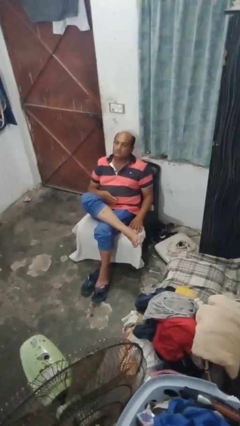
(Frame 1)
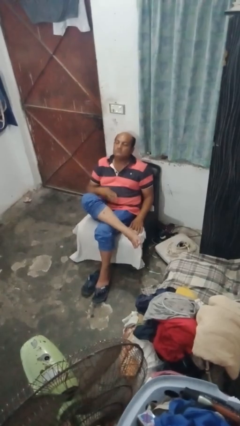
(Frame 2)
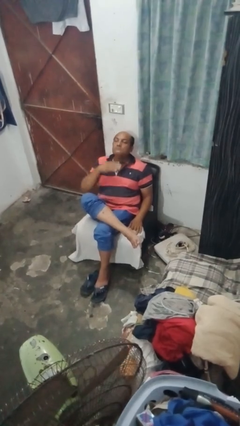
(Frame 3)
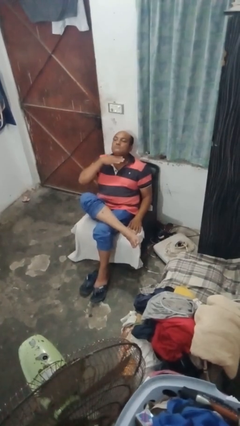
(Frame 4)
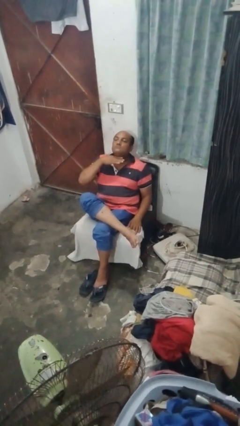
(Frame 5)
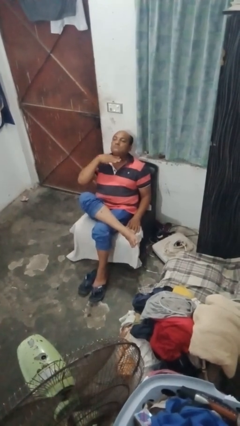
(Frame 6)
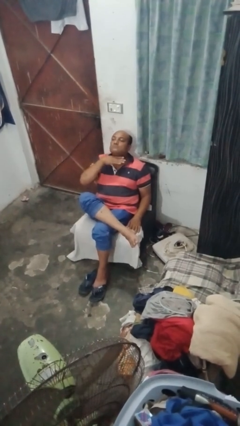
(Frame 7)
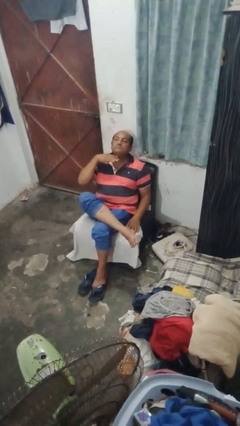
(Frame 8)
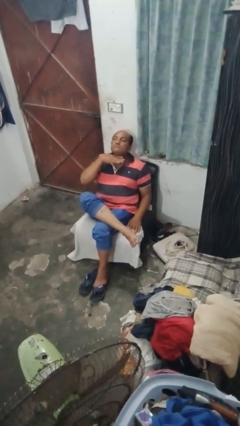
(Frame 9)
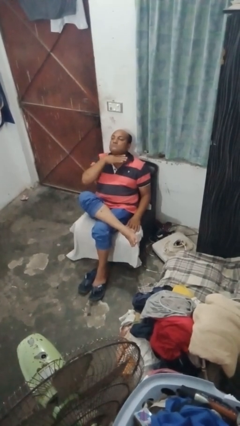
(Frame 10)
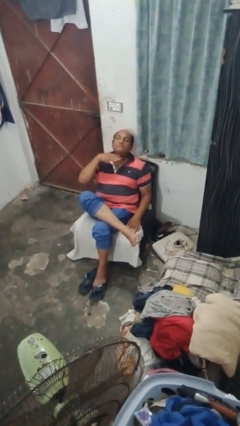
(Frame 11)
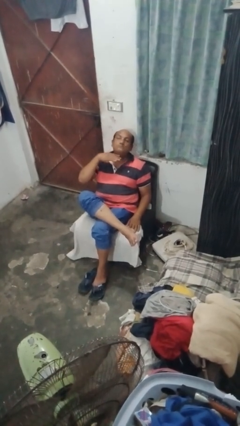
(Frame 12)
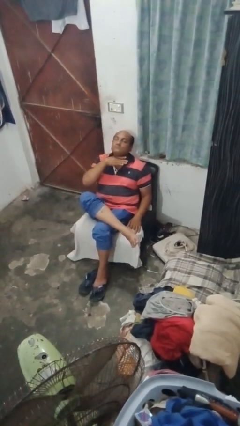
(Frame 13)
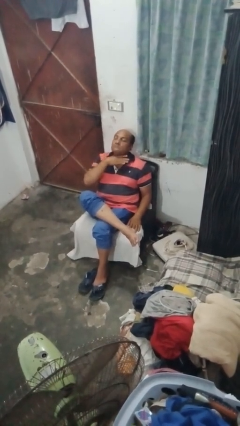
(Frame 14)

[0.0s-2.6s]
person gestures cut

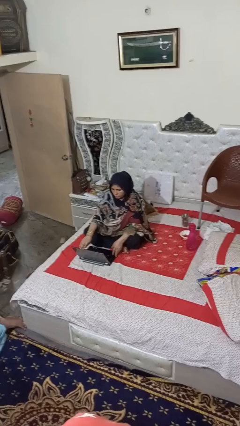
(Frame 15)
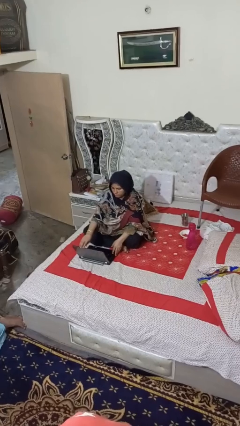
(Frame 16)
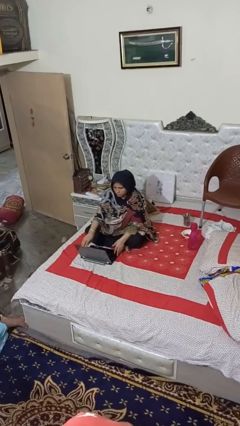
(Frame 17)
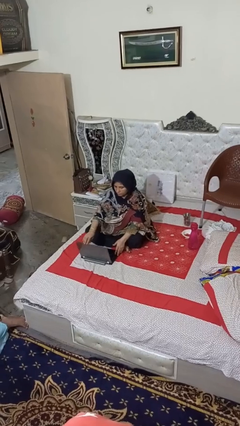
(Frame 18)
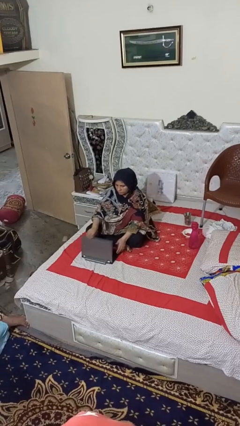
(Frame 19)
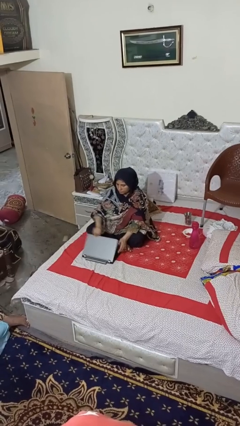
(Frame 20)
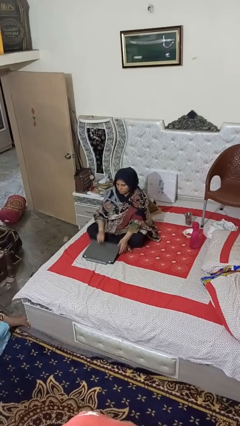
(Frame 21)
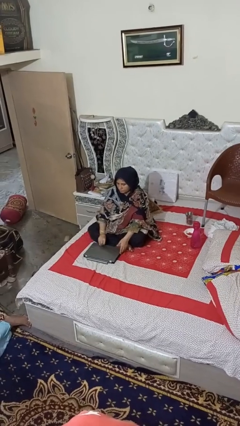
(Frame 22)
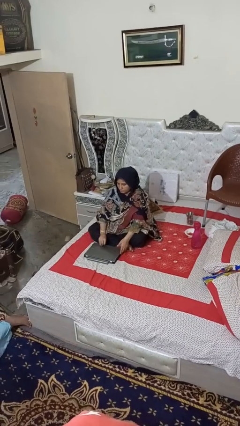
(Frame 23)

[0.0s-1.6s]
person closes laptop

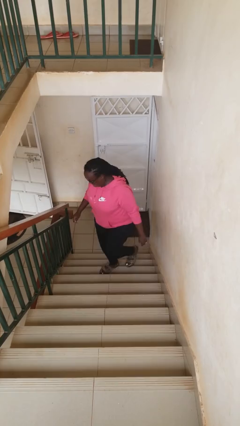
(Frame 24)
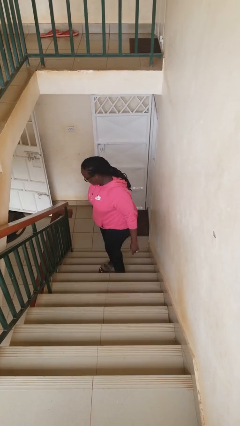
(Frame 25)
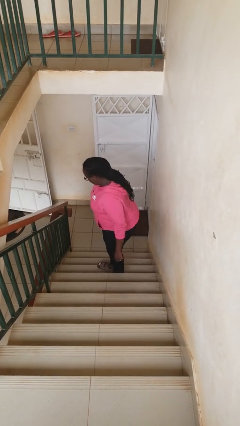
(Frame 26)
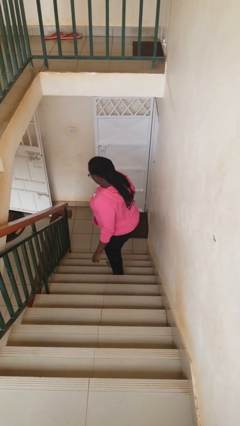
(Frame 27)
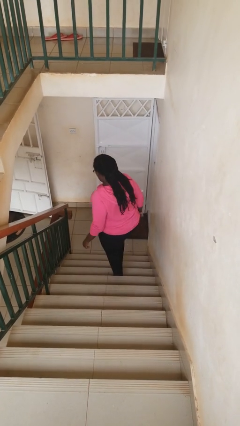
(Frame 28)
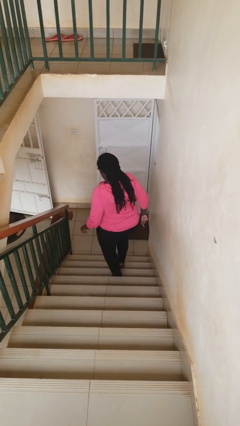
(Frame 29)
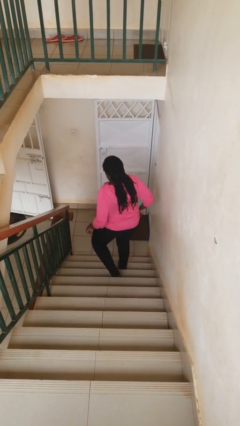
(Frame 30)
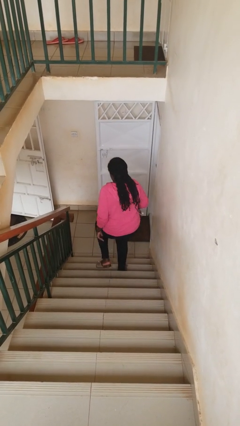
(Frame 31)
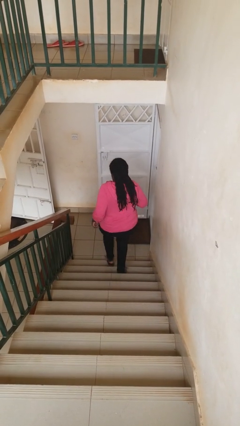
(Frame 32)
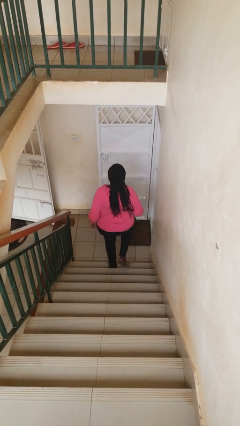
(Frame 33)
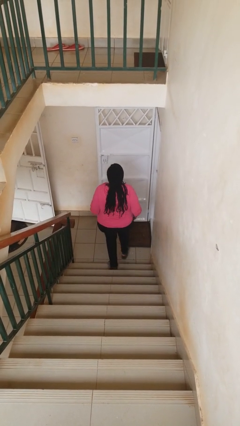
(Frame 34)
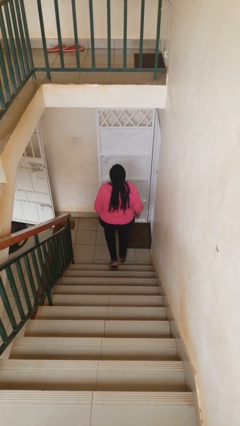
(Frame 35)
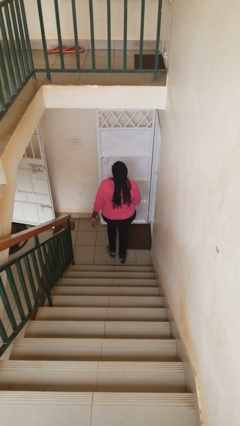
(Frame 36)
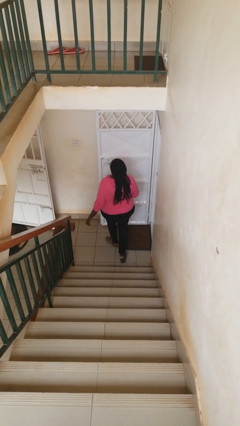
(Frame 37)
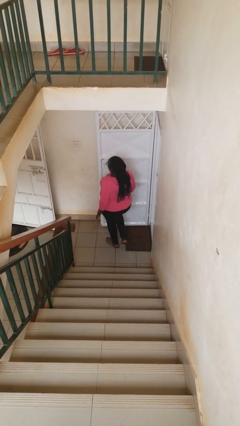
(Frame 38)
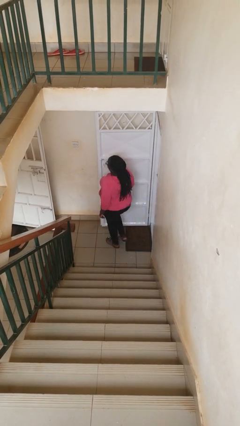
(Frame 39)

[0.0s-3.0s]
person climbs down stairs

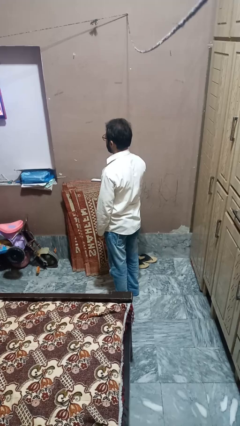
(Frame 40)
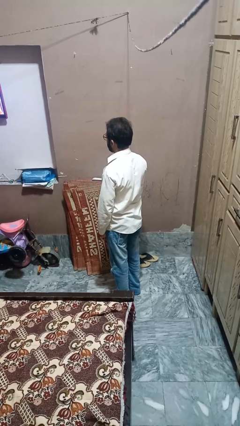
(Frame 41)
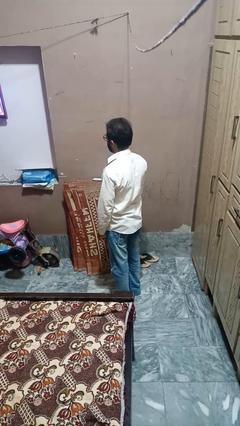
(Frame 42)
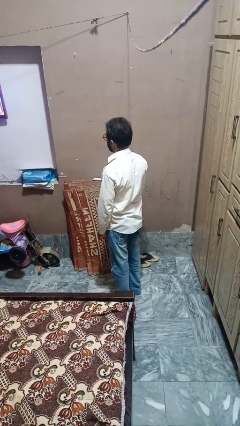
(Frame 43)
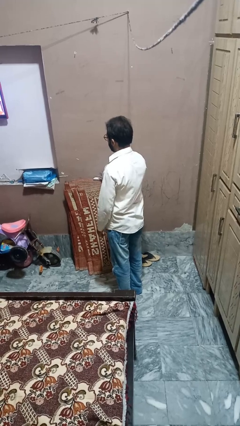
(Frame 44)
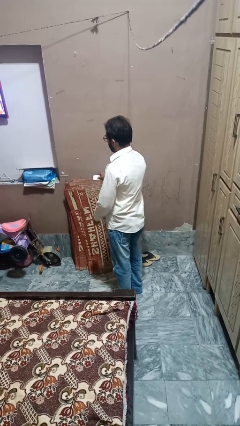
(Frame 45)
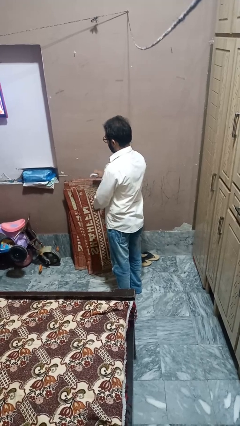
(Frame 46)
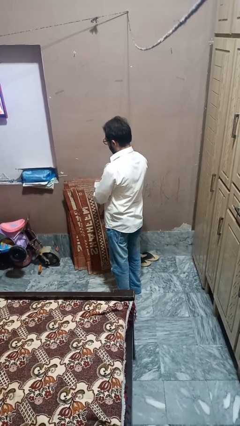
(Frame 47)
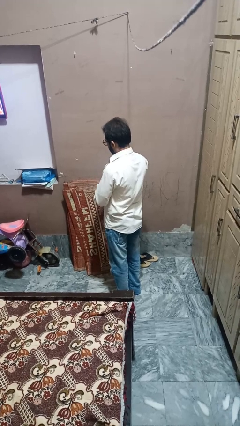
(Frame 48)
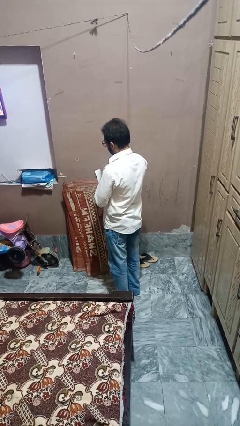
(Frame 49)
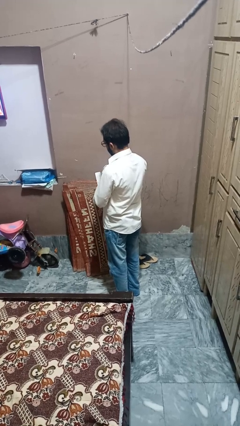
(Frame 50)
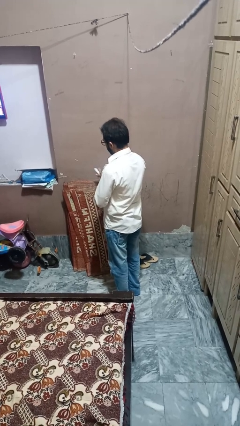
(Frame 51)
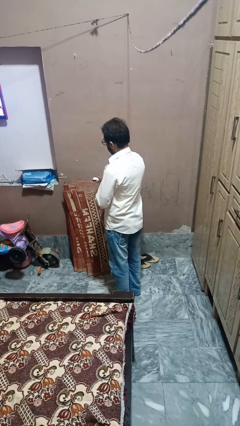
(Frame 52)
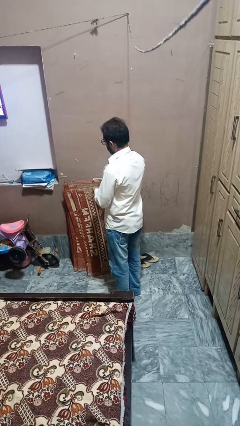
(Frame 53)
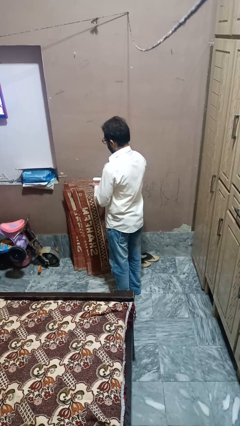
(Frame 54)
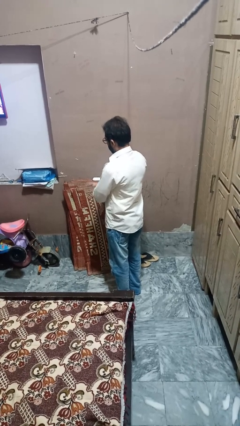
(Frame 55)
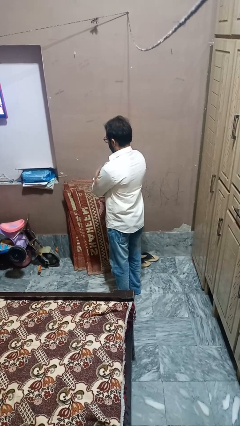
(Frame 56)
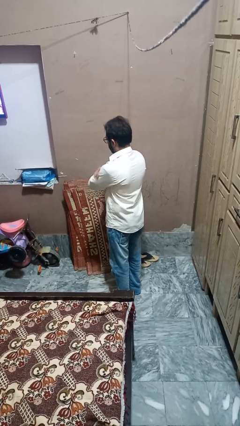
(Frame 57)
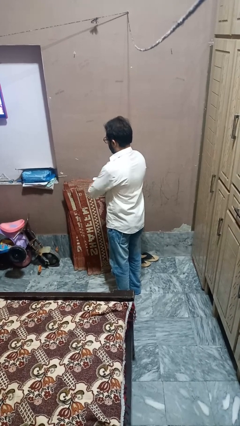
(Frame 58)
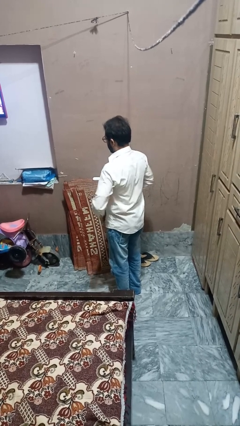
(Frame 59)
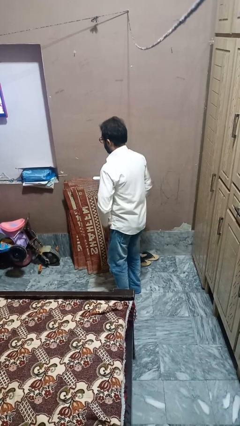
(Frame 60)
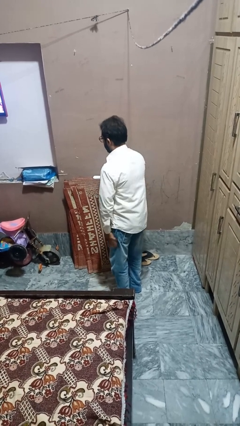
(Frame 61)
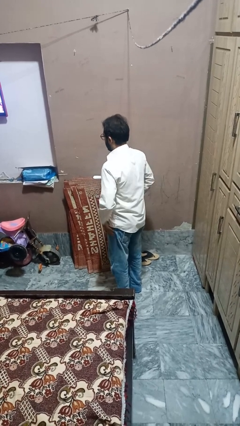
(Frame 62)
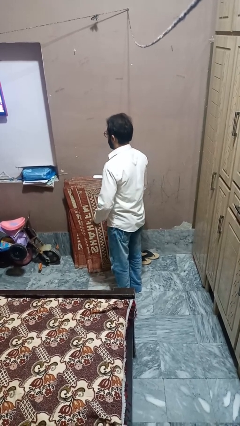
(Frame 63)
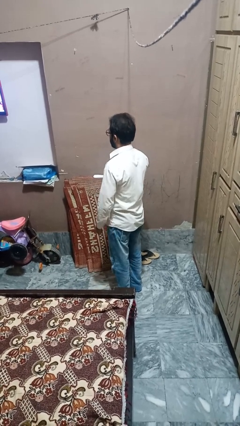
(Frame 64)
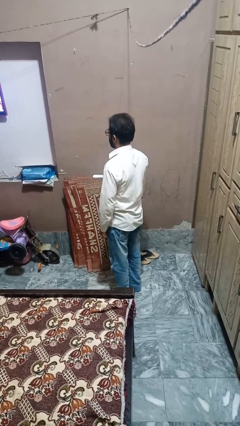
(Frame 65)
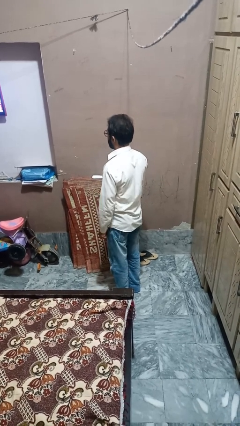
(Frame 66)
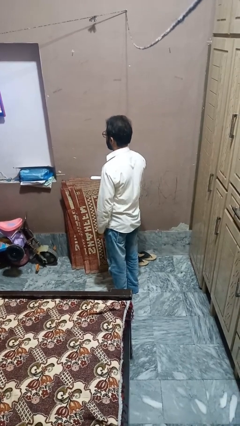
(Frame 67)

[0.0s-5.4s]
person applies sunscreen

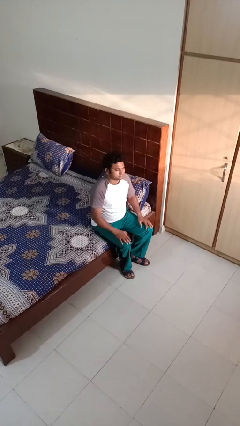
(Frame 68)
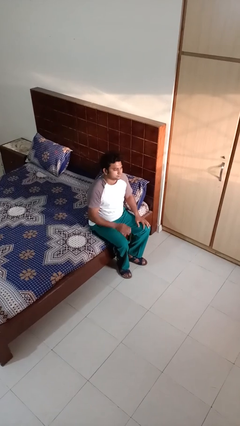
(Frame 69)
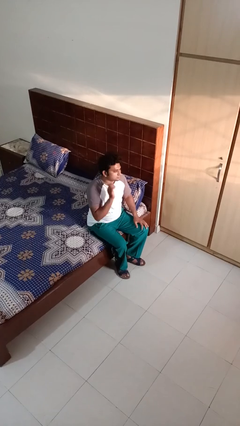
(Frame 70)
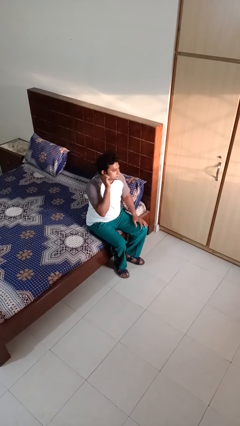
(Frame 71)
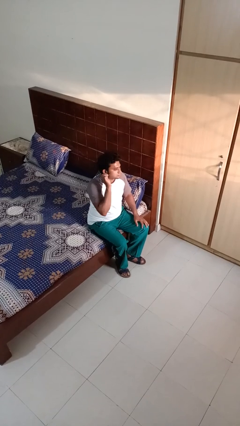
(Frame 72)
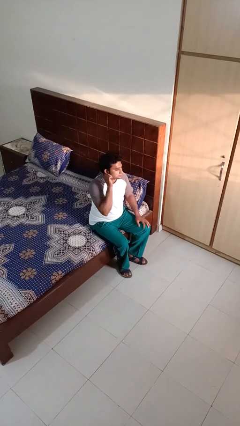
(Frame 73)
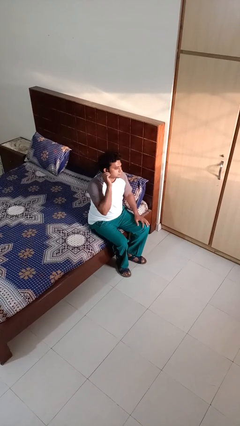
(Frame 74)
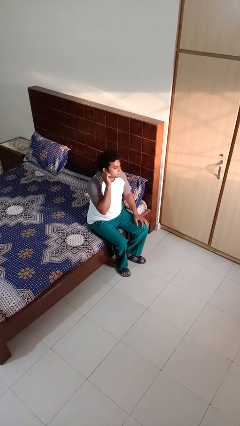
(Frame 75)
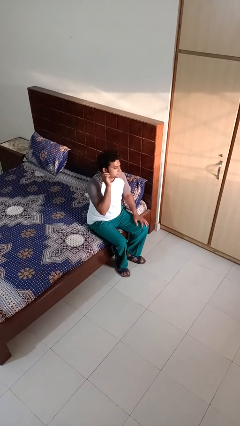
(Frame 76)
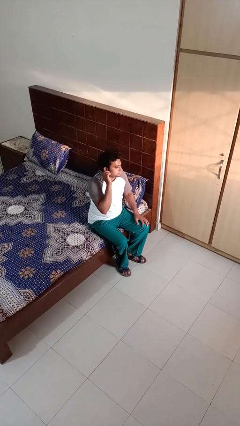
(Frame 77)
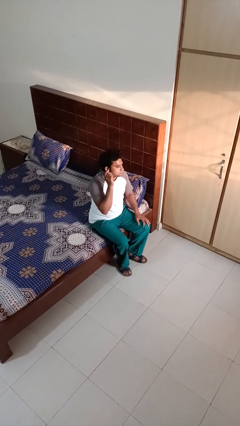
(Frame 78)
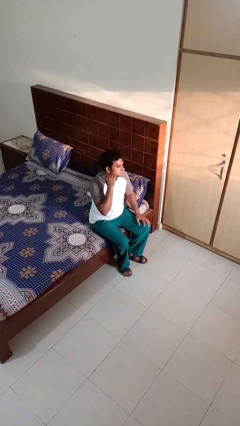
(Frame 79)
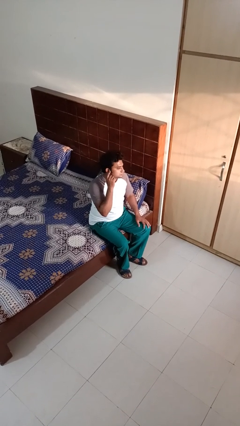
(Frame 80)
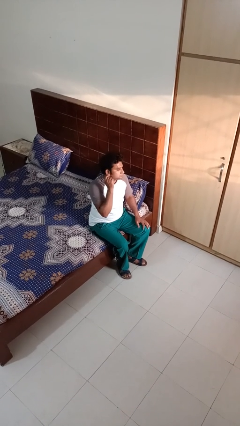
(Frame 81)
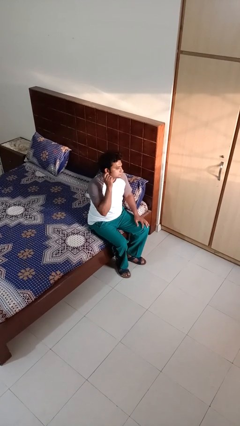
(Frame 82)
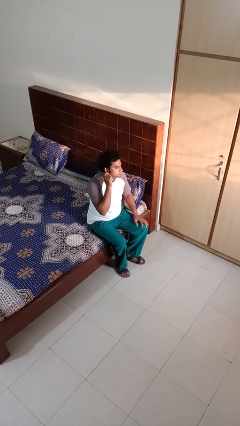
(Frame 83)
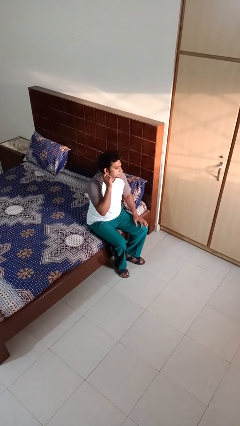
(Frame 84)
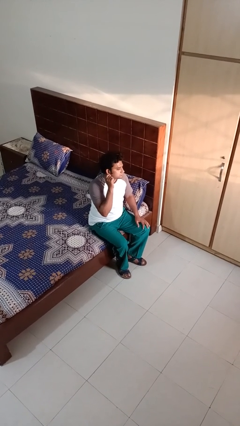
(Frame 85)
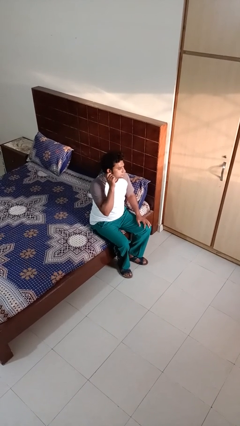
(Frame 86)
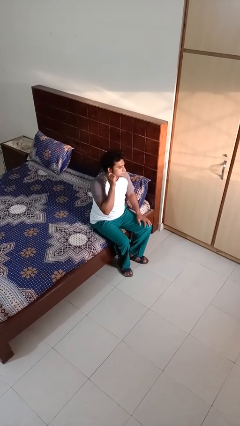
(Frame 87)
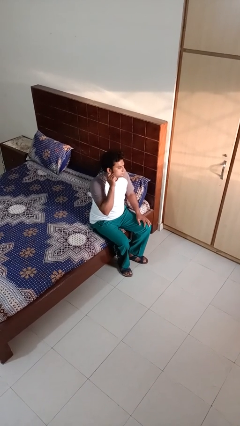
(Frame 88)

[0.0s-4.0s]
person touches earlobe

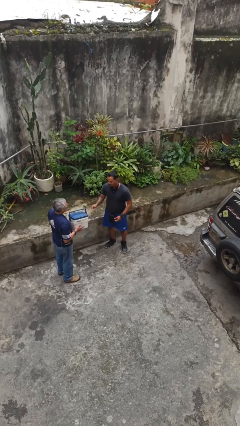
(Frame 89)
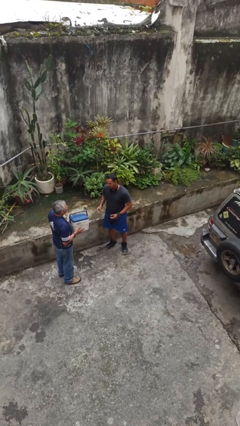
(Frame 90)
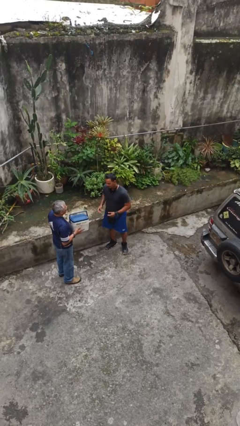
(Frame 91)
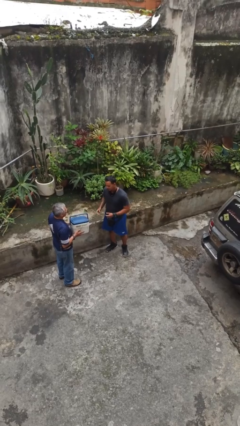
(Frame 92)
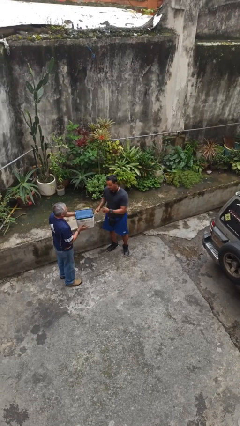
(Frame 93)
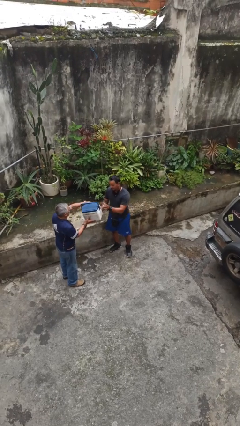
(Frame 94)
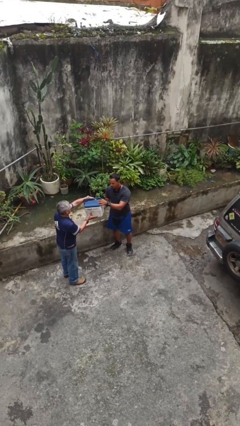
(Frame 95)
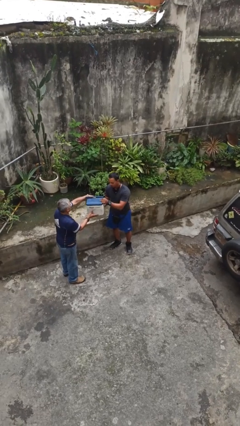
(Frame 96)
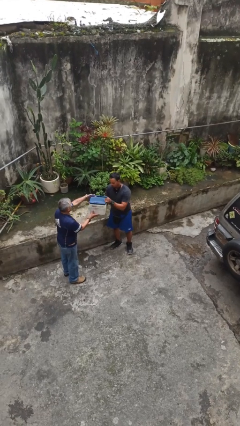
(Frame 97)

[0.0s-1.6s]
person transfers object to person
